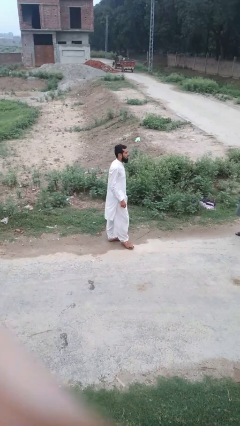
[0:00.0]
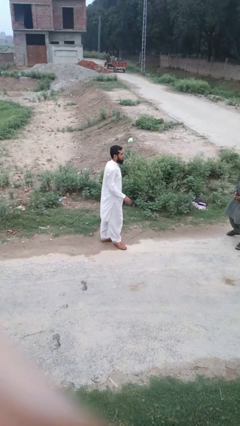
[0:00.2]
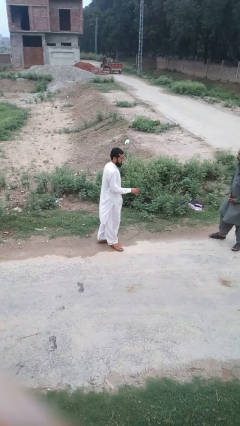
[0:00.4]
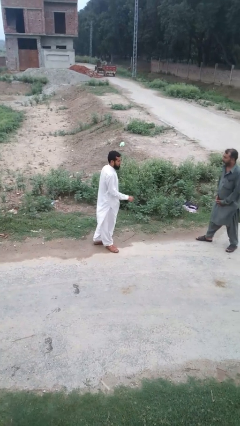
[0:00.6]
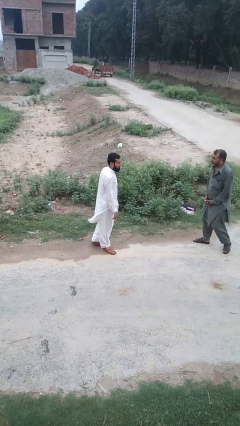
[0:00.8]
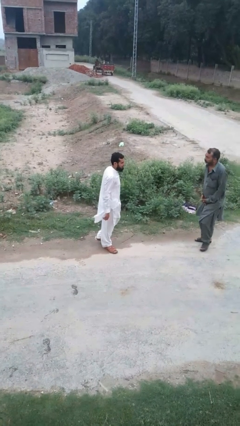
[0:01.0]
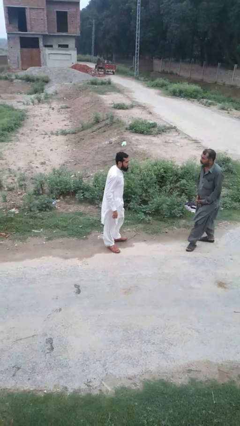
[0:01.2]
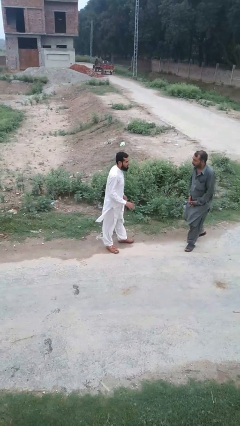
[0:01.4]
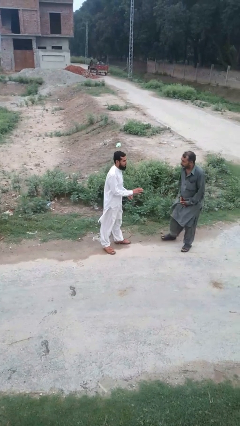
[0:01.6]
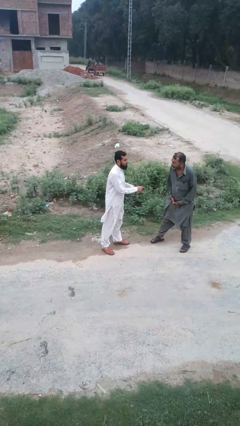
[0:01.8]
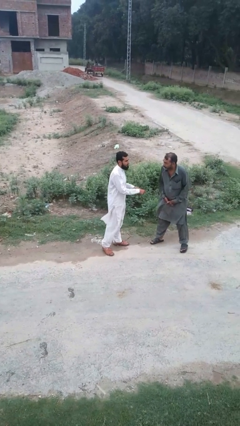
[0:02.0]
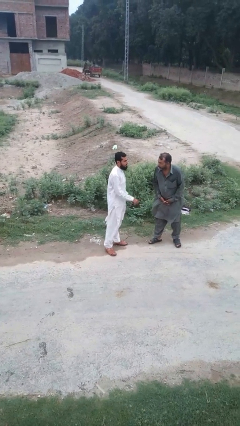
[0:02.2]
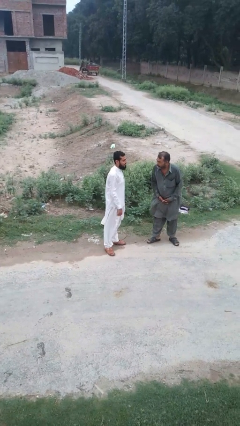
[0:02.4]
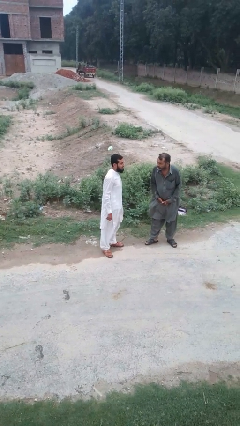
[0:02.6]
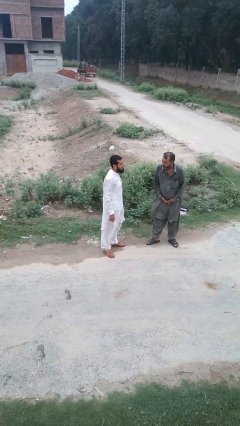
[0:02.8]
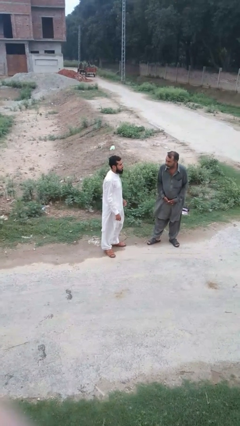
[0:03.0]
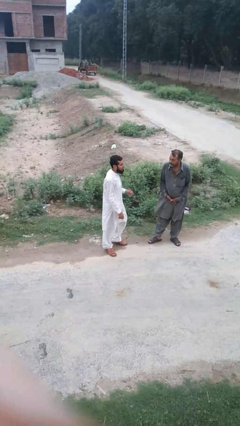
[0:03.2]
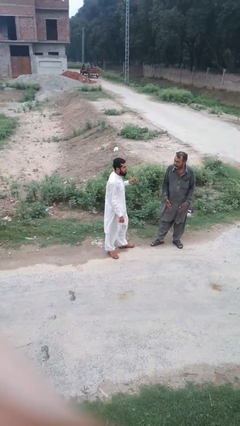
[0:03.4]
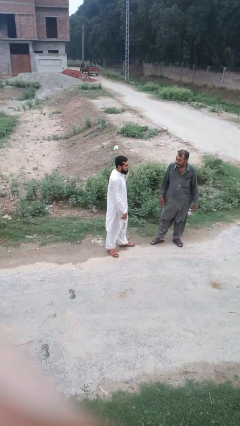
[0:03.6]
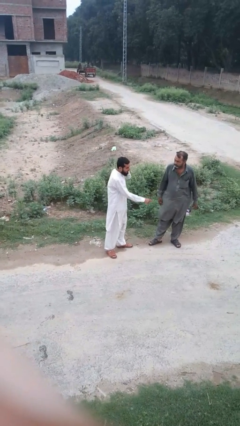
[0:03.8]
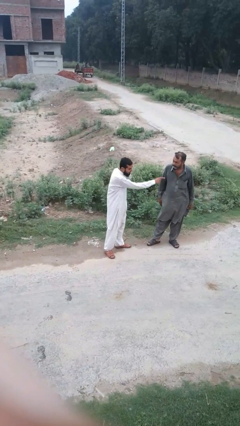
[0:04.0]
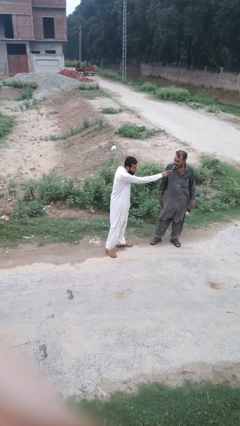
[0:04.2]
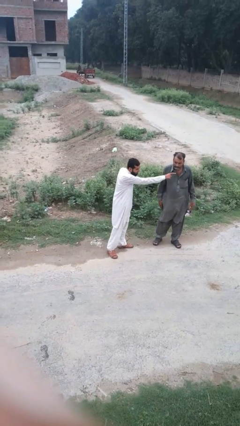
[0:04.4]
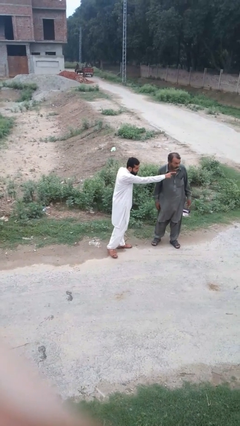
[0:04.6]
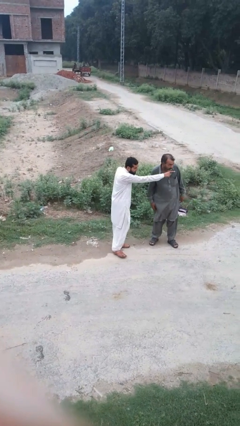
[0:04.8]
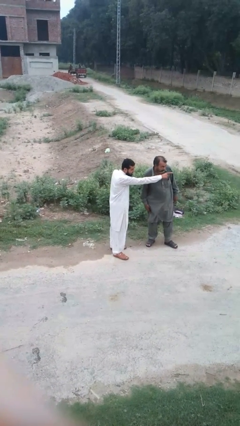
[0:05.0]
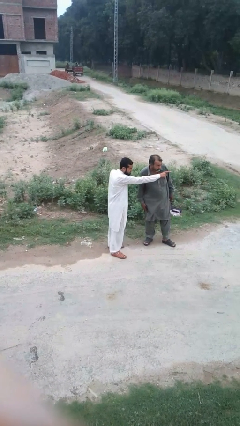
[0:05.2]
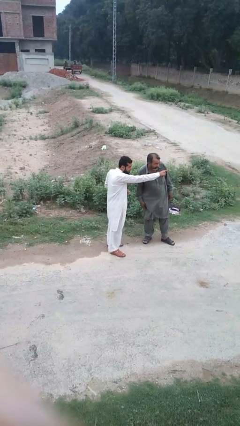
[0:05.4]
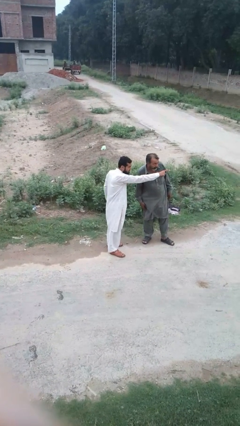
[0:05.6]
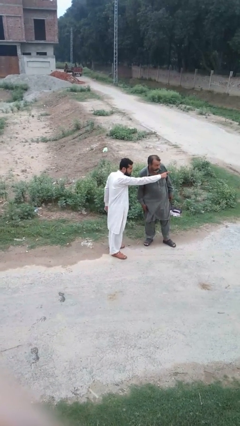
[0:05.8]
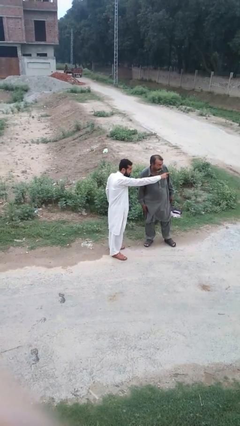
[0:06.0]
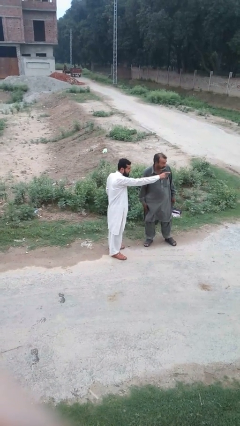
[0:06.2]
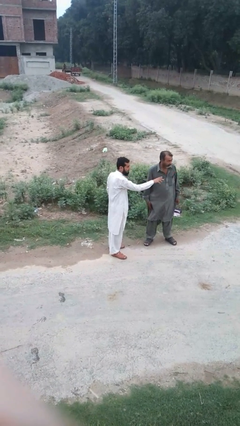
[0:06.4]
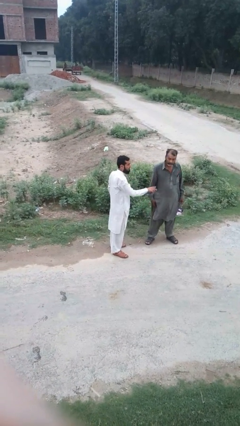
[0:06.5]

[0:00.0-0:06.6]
person points at person

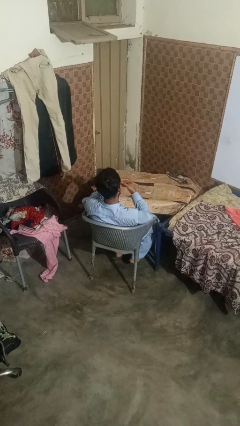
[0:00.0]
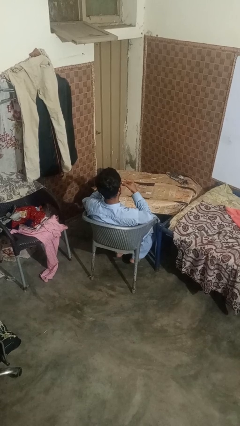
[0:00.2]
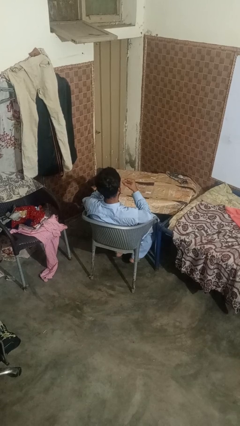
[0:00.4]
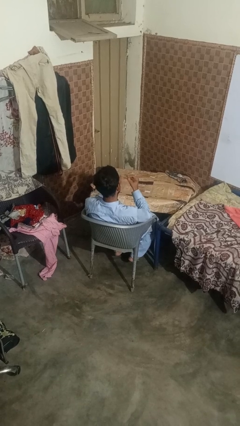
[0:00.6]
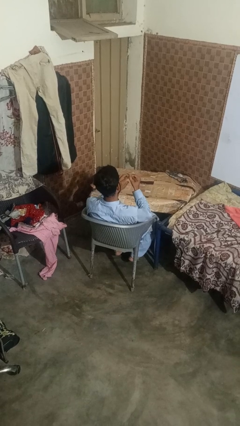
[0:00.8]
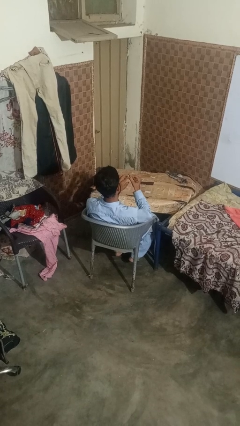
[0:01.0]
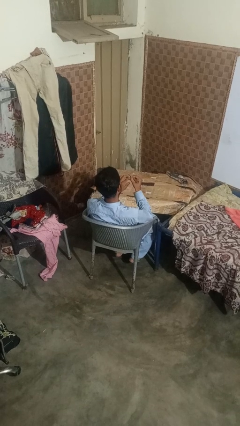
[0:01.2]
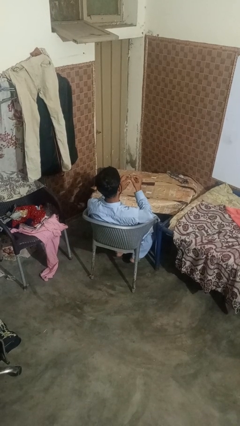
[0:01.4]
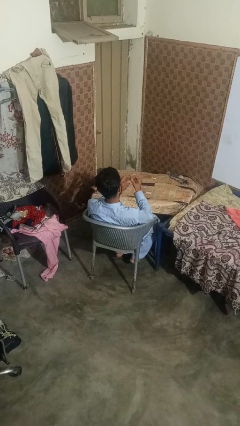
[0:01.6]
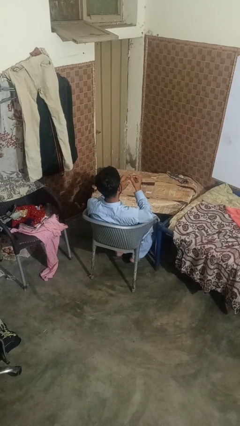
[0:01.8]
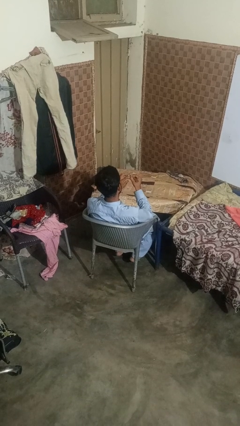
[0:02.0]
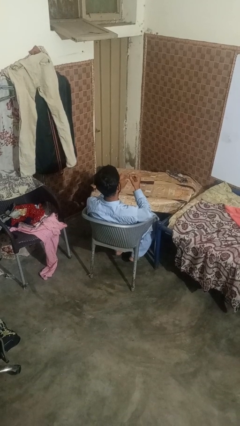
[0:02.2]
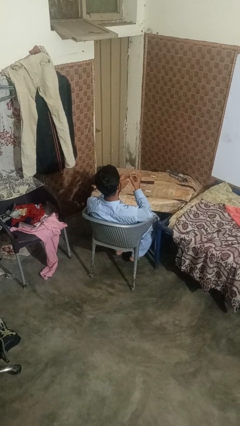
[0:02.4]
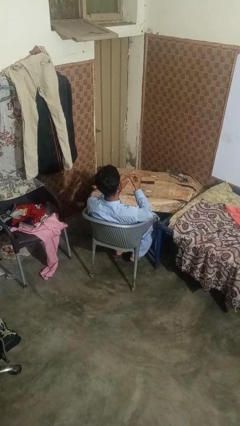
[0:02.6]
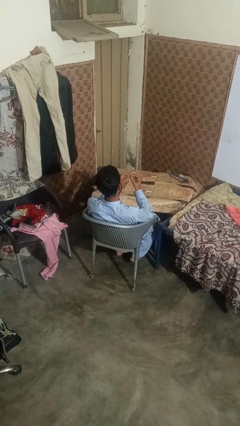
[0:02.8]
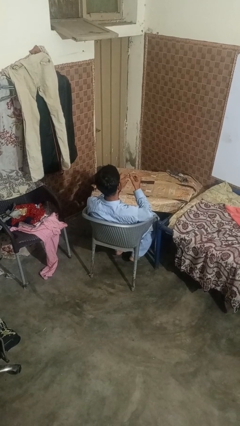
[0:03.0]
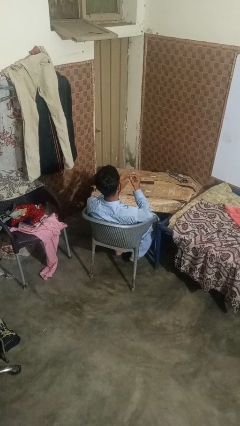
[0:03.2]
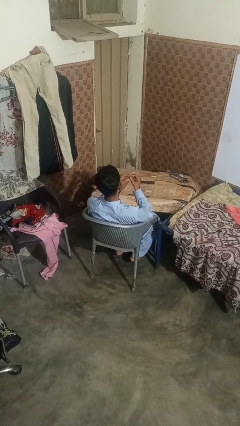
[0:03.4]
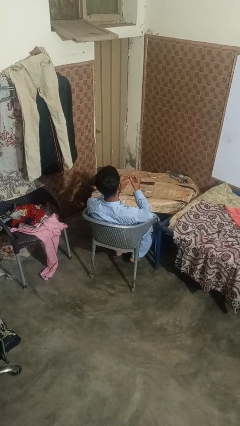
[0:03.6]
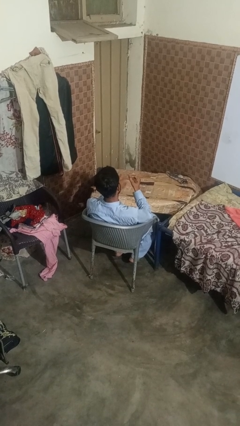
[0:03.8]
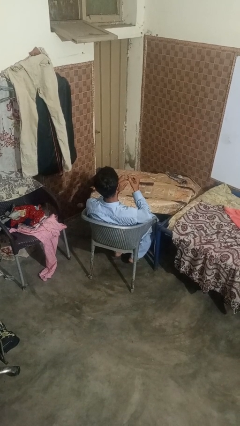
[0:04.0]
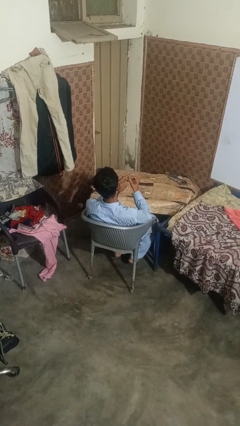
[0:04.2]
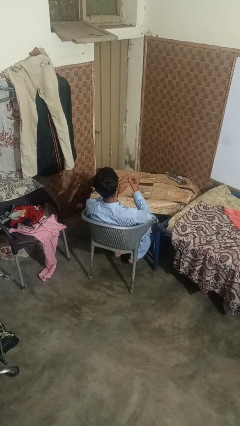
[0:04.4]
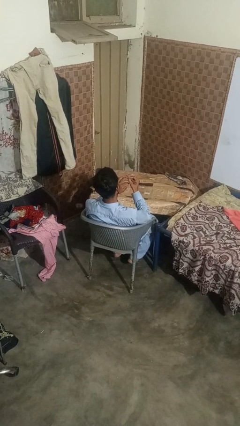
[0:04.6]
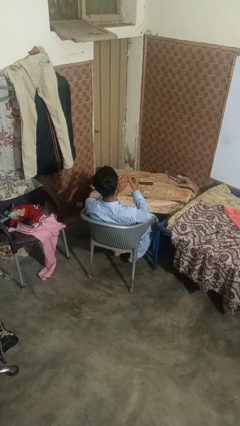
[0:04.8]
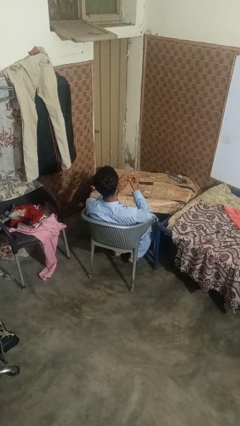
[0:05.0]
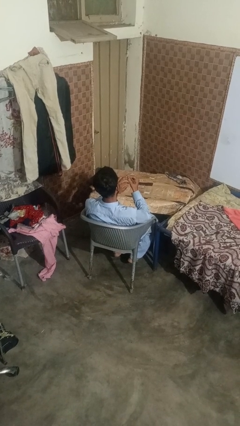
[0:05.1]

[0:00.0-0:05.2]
person files fingernails

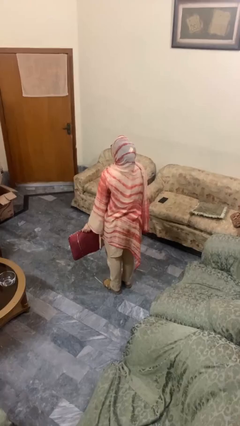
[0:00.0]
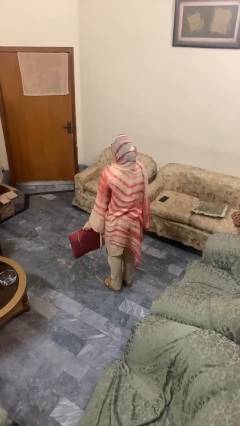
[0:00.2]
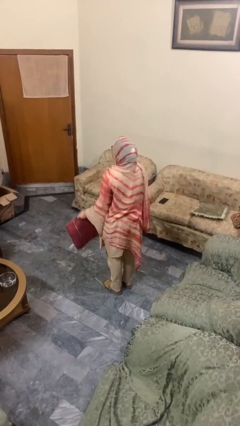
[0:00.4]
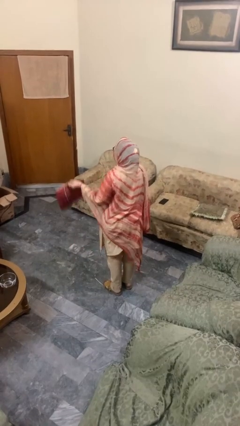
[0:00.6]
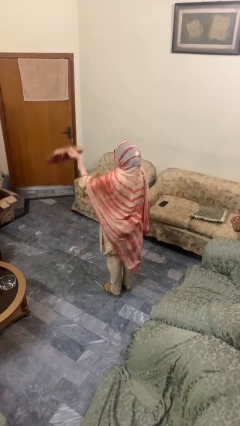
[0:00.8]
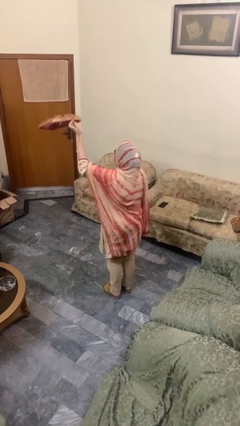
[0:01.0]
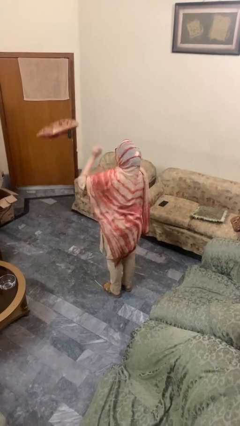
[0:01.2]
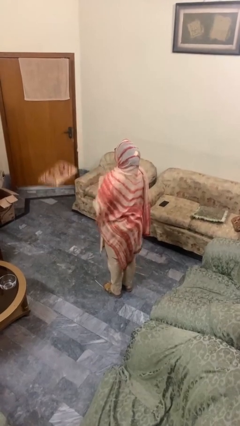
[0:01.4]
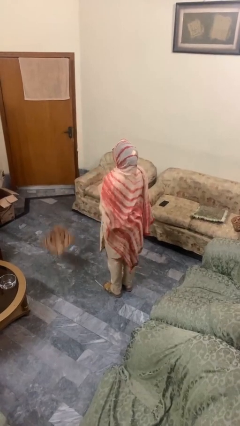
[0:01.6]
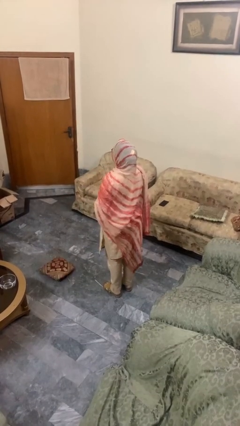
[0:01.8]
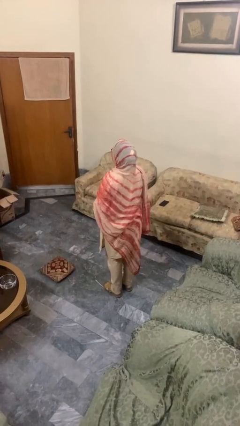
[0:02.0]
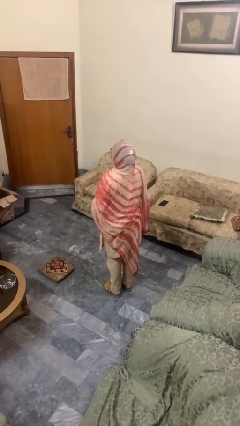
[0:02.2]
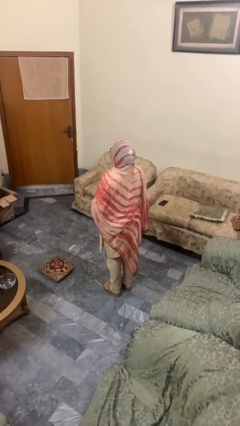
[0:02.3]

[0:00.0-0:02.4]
person throws object into air

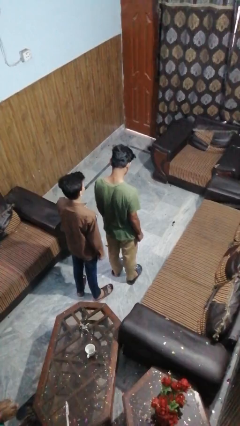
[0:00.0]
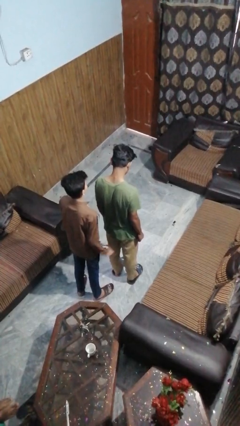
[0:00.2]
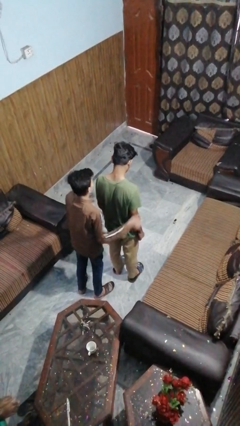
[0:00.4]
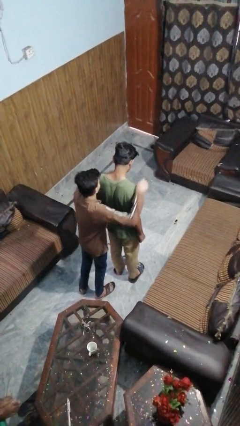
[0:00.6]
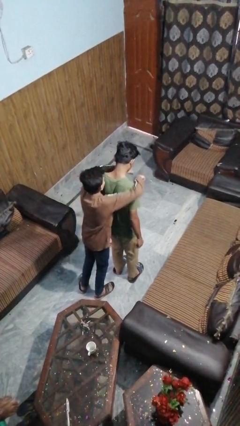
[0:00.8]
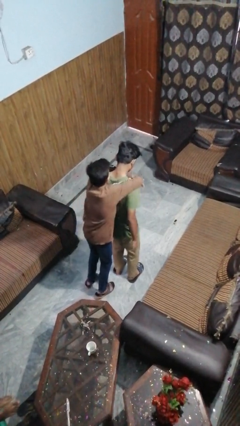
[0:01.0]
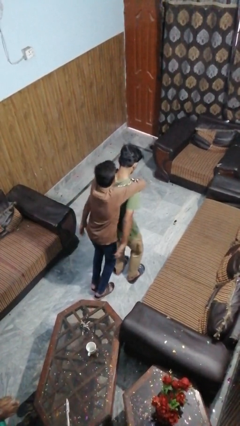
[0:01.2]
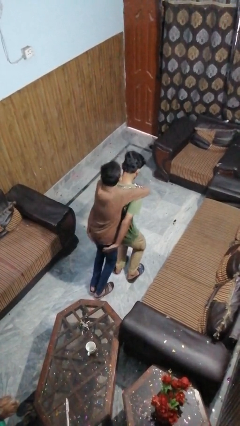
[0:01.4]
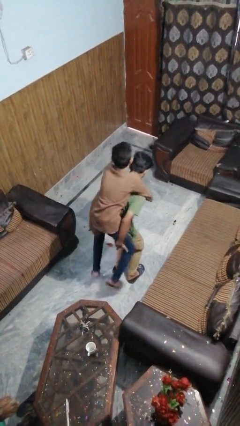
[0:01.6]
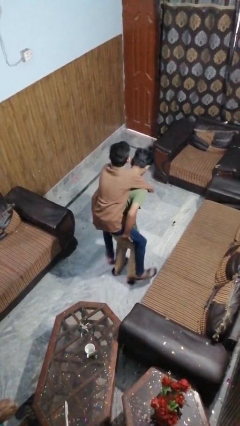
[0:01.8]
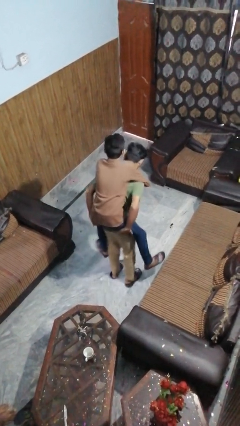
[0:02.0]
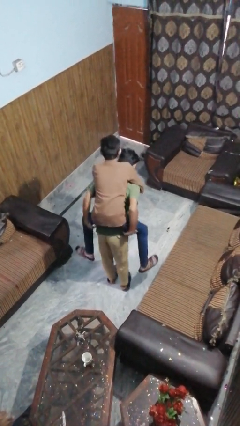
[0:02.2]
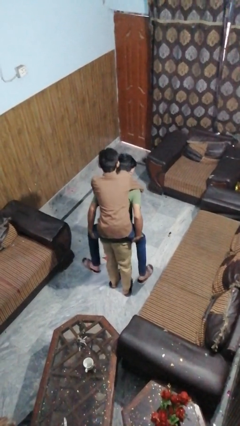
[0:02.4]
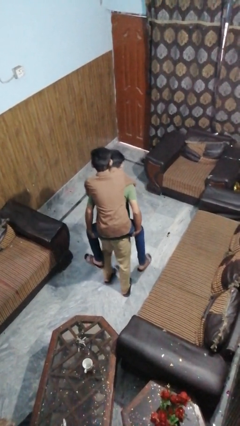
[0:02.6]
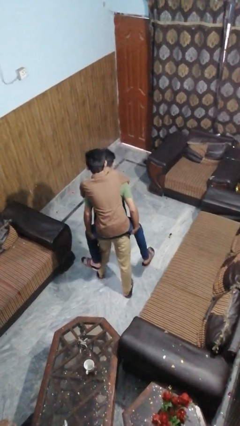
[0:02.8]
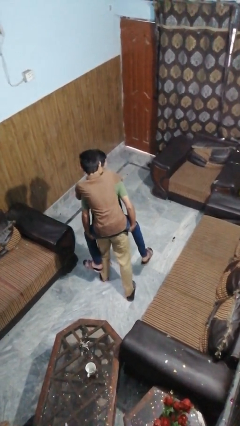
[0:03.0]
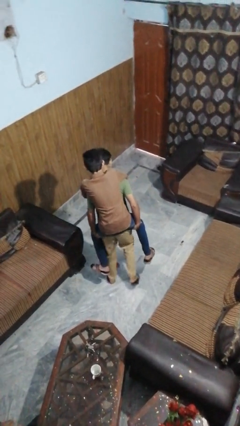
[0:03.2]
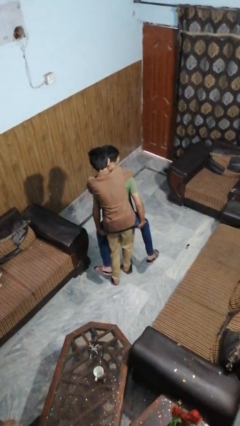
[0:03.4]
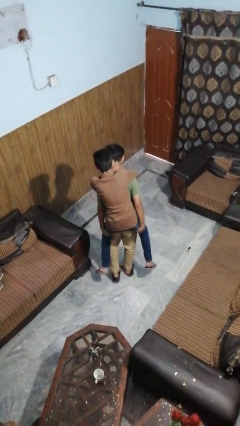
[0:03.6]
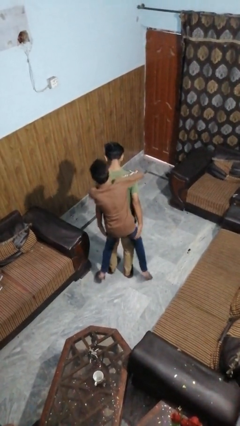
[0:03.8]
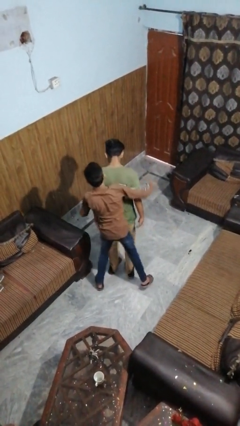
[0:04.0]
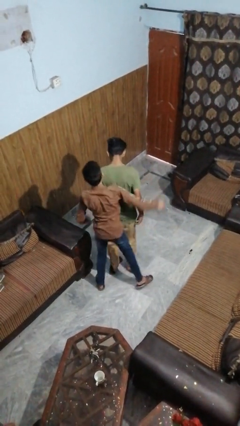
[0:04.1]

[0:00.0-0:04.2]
person carries person on back
